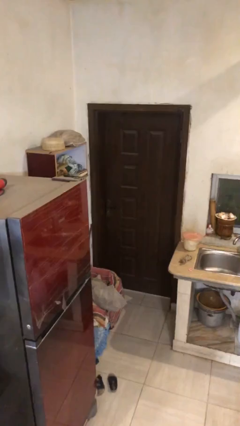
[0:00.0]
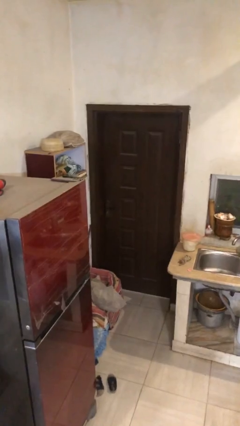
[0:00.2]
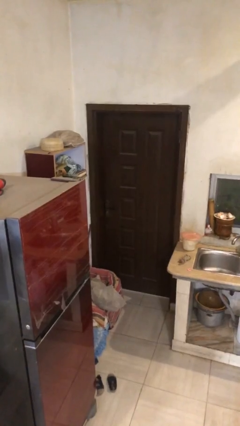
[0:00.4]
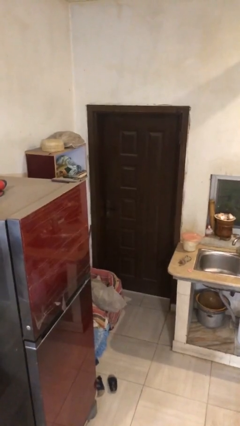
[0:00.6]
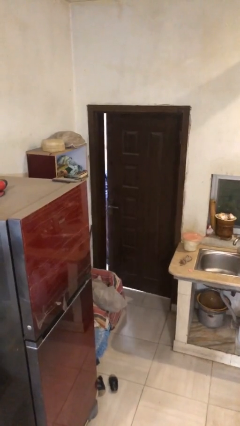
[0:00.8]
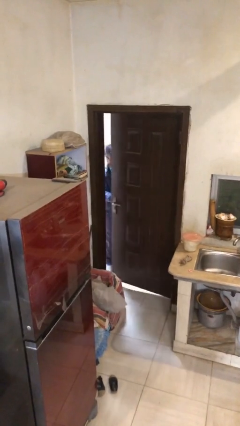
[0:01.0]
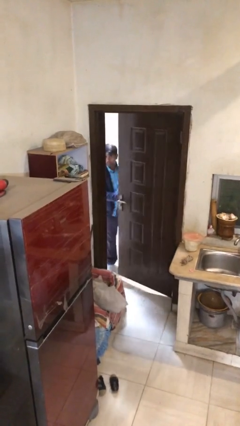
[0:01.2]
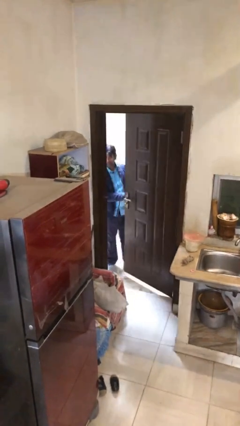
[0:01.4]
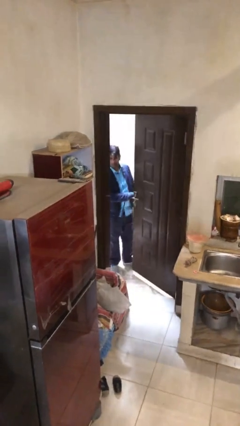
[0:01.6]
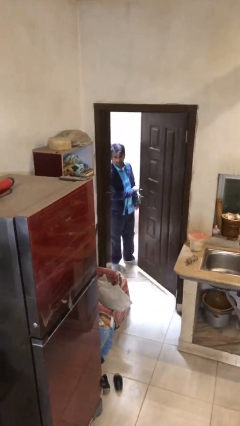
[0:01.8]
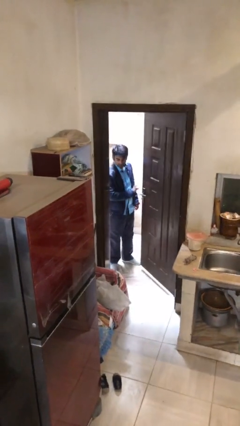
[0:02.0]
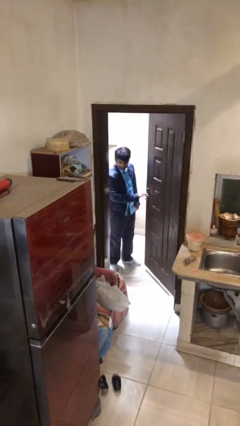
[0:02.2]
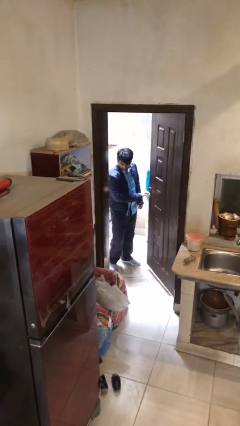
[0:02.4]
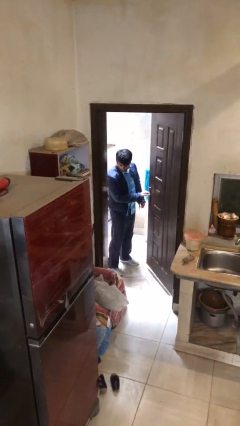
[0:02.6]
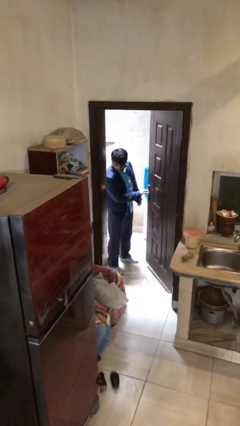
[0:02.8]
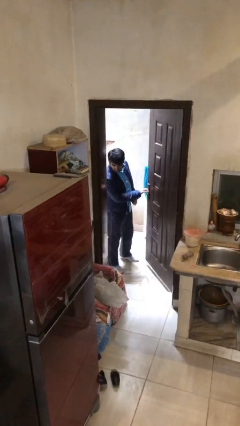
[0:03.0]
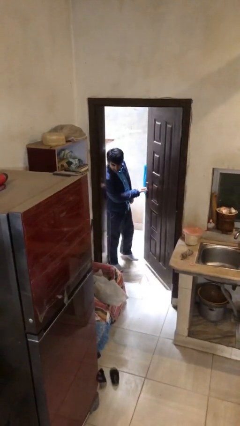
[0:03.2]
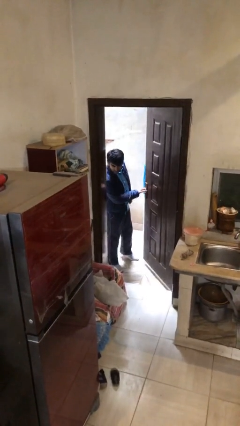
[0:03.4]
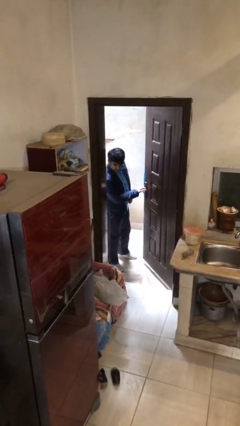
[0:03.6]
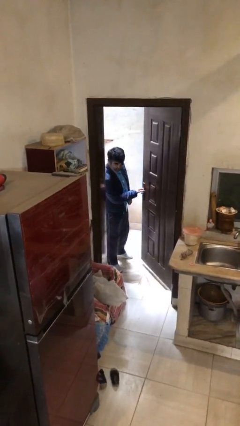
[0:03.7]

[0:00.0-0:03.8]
person opens facility door

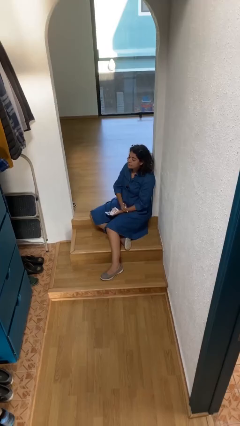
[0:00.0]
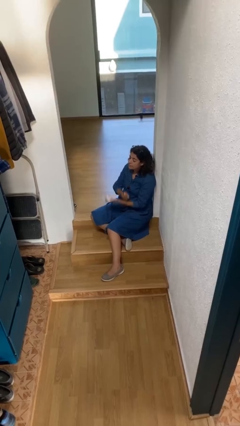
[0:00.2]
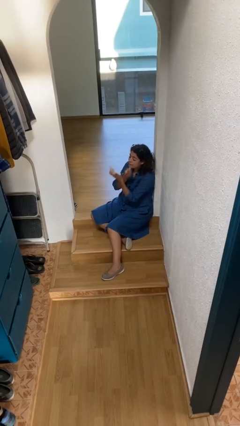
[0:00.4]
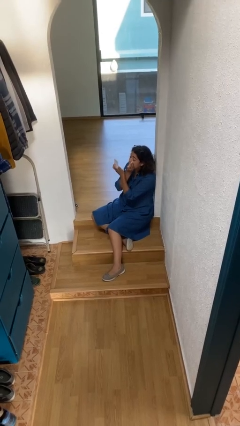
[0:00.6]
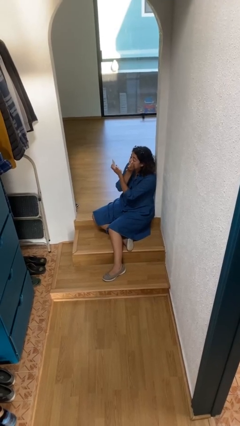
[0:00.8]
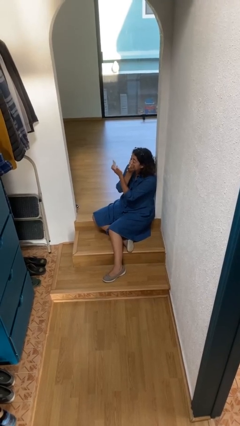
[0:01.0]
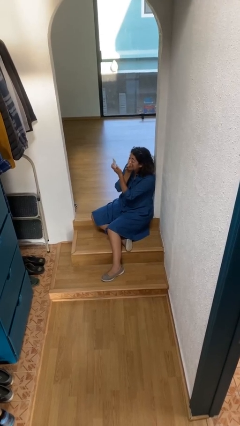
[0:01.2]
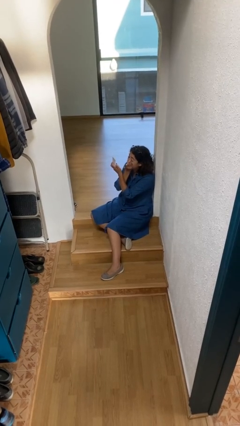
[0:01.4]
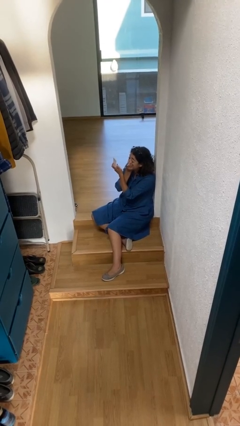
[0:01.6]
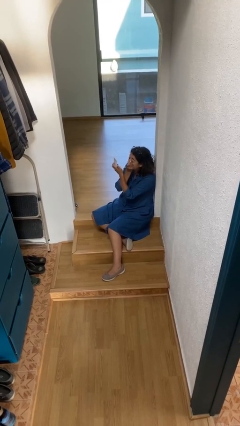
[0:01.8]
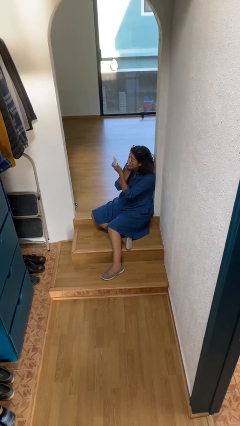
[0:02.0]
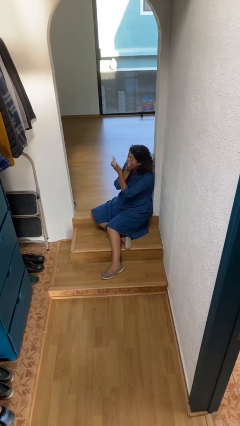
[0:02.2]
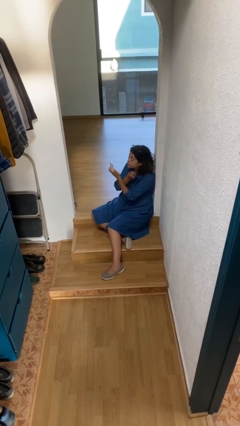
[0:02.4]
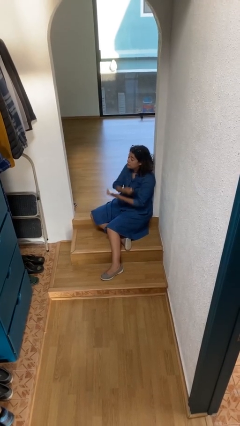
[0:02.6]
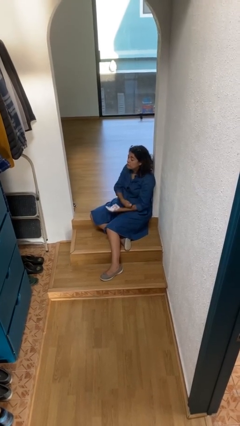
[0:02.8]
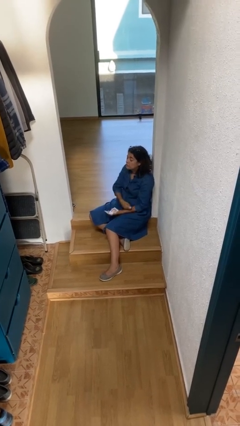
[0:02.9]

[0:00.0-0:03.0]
person applies eye makeup

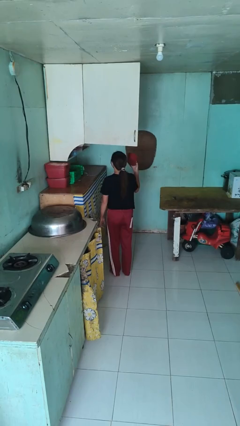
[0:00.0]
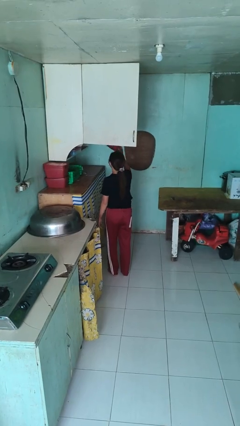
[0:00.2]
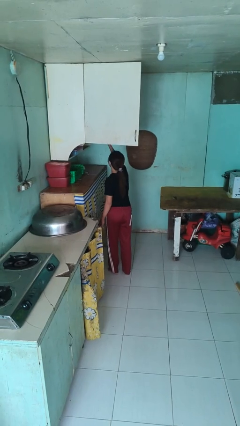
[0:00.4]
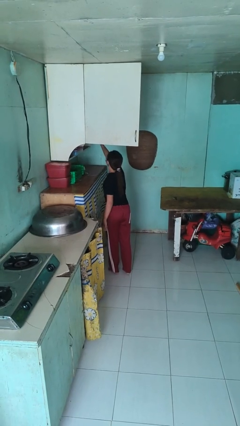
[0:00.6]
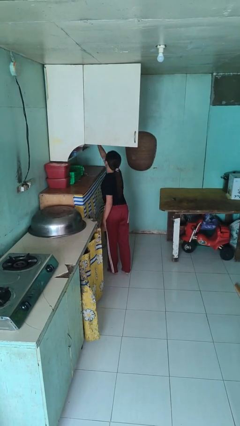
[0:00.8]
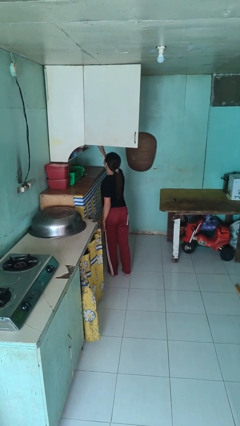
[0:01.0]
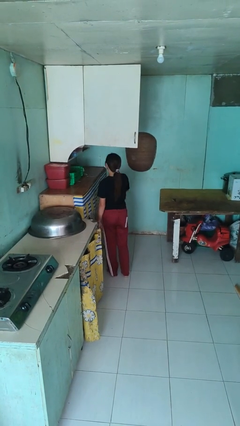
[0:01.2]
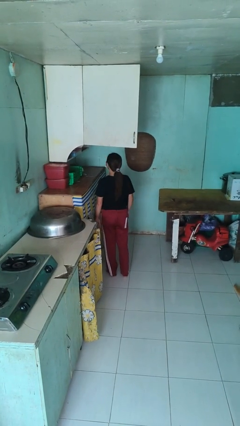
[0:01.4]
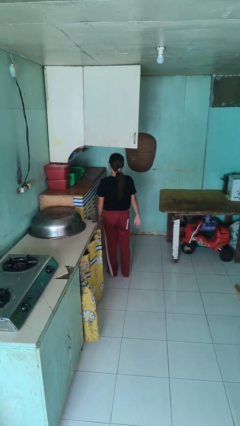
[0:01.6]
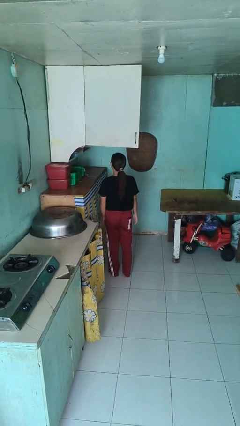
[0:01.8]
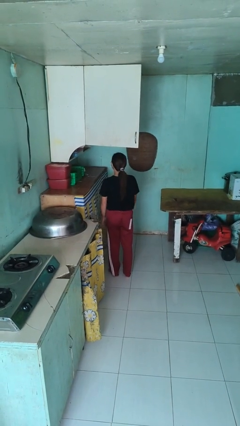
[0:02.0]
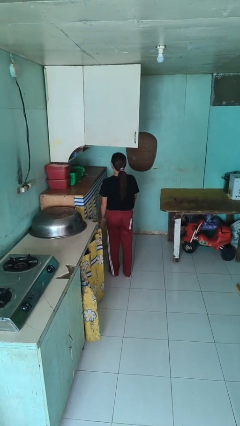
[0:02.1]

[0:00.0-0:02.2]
person puts object in cabinet

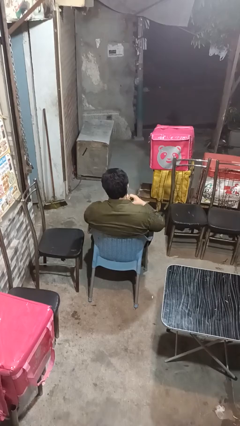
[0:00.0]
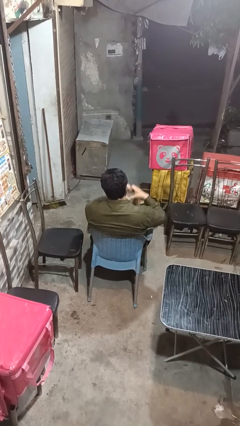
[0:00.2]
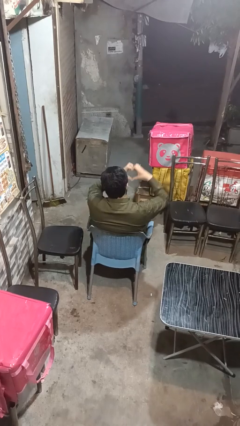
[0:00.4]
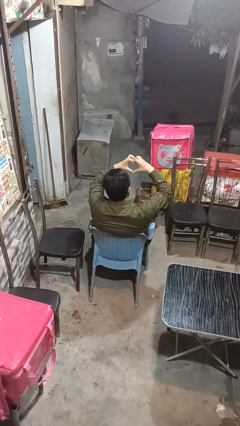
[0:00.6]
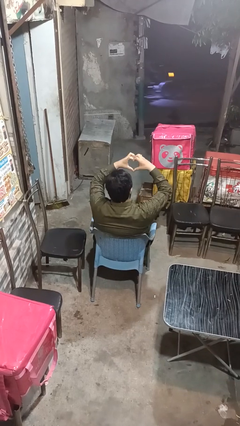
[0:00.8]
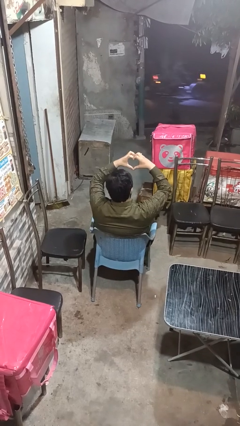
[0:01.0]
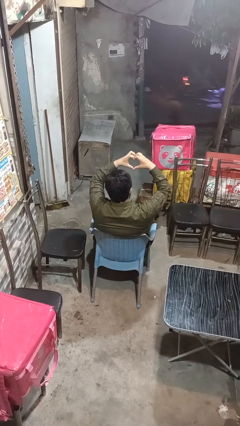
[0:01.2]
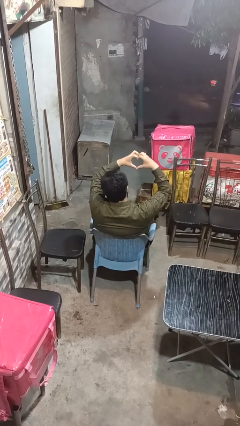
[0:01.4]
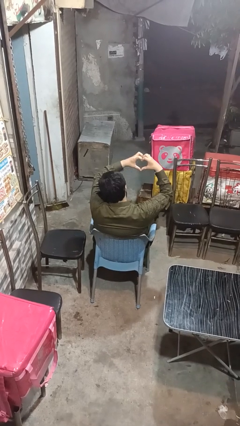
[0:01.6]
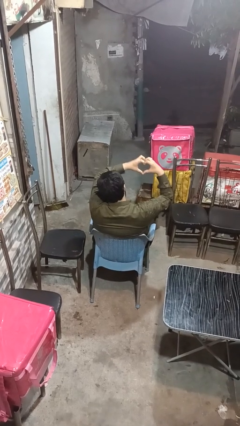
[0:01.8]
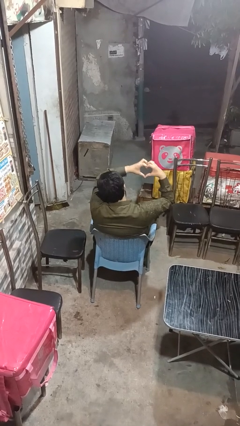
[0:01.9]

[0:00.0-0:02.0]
person gestures heart

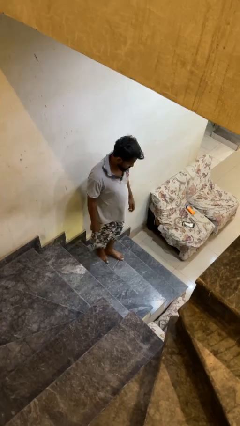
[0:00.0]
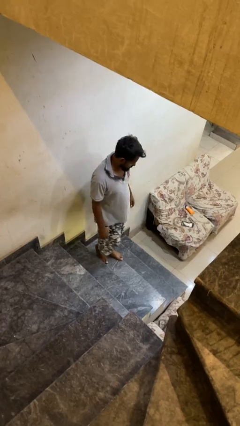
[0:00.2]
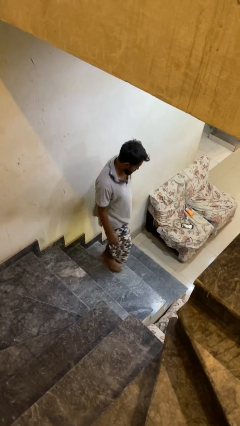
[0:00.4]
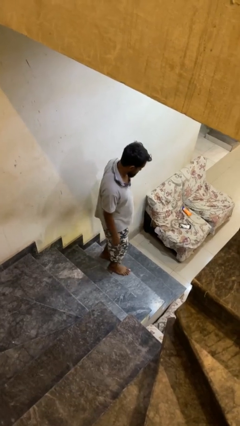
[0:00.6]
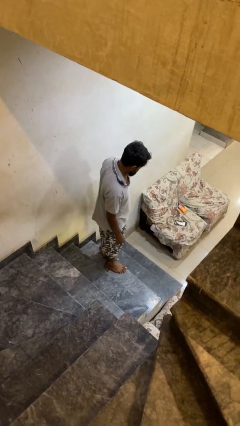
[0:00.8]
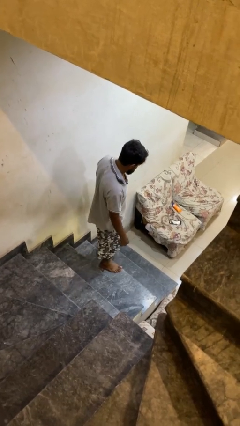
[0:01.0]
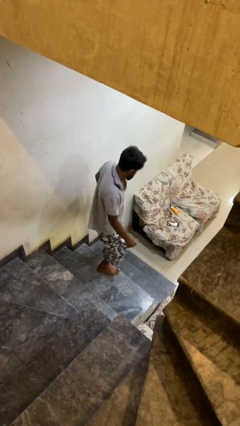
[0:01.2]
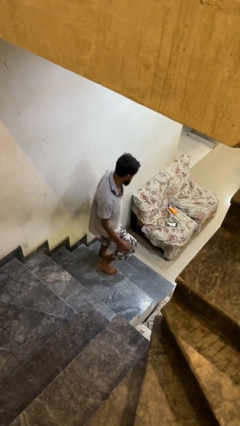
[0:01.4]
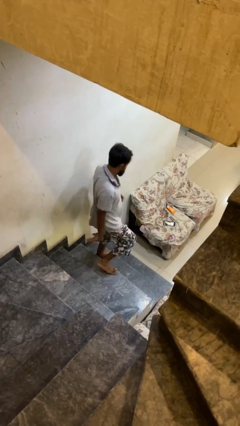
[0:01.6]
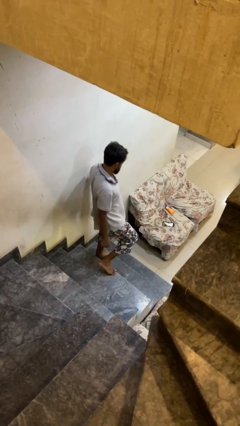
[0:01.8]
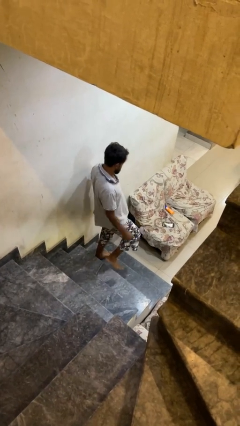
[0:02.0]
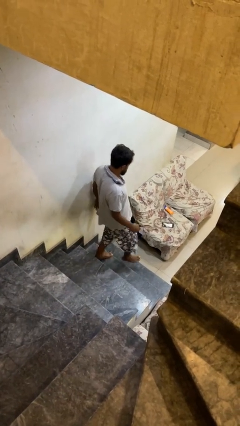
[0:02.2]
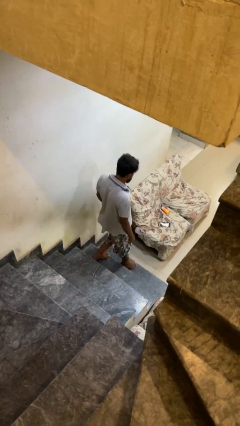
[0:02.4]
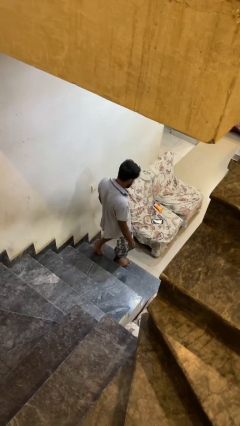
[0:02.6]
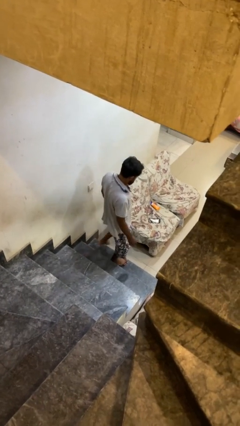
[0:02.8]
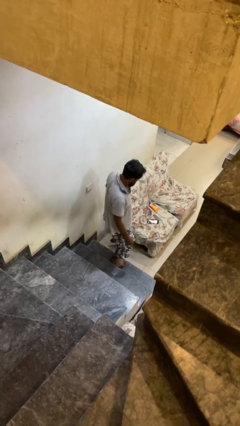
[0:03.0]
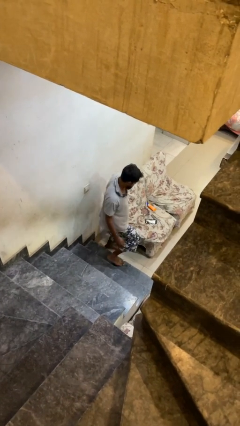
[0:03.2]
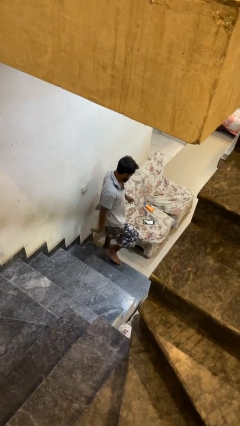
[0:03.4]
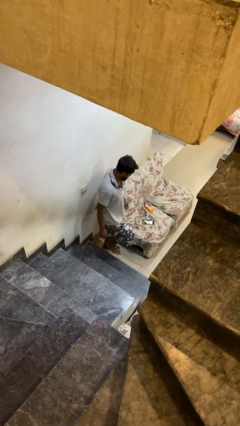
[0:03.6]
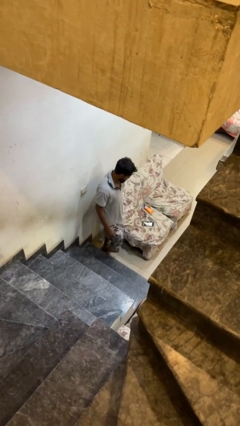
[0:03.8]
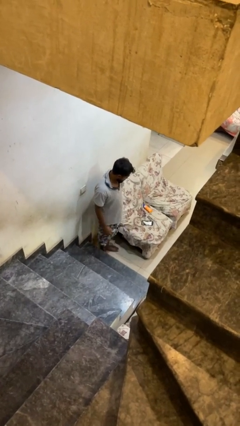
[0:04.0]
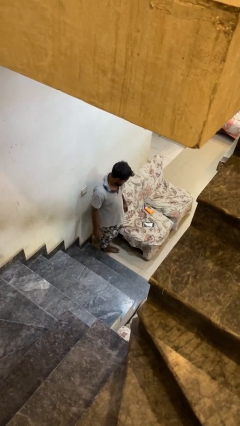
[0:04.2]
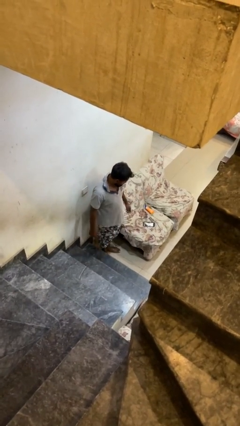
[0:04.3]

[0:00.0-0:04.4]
person climbs down stairs

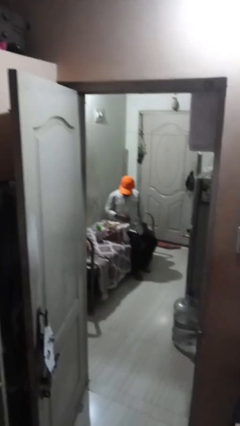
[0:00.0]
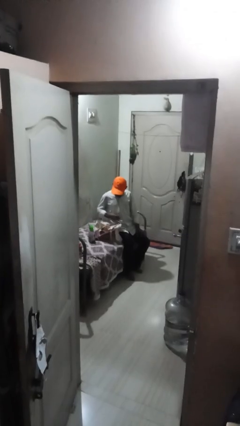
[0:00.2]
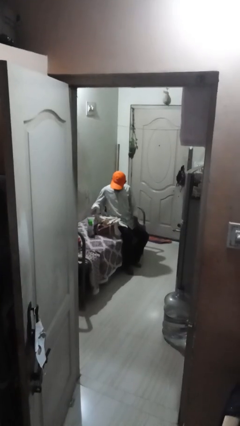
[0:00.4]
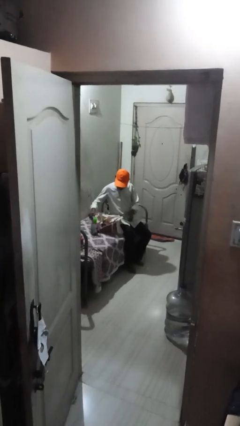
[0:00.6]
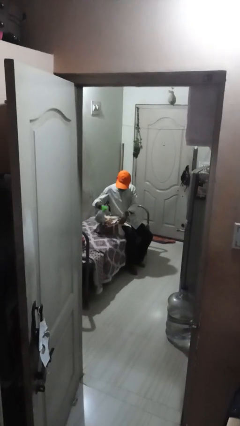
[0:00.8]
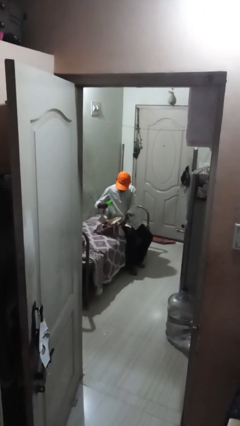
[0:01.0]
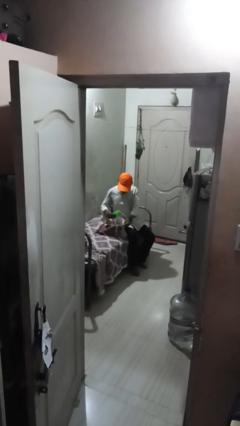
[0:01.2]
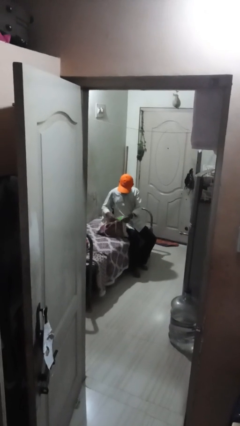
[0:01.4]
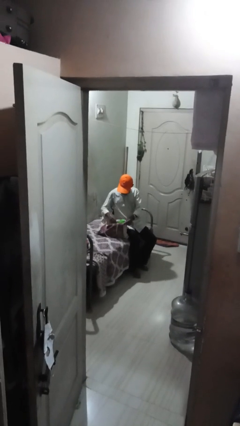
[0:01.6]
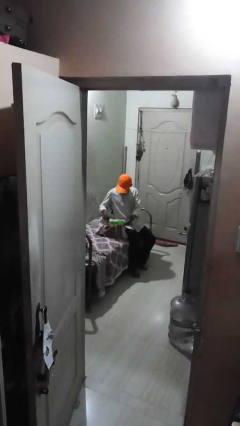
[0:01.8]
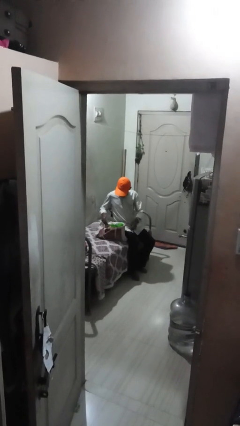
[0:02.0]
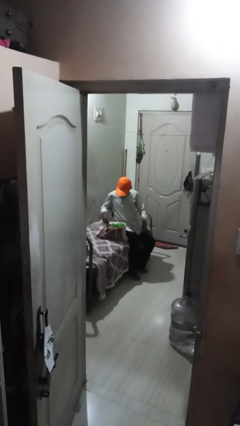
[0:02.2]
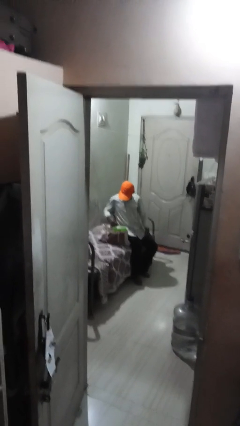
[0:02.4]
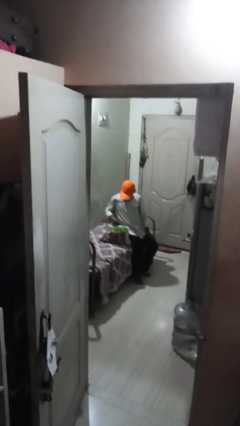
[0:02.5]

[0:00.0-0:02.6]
person puts object into bag
